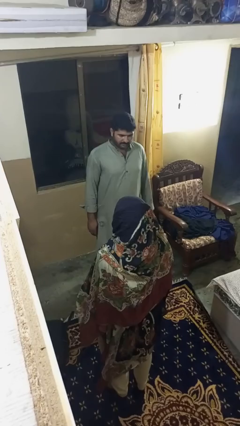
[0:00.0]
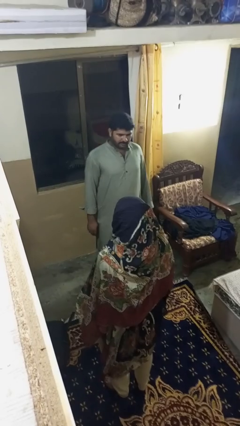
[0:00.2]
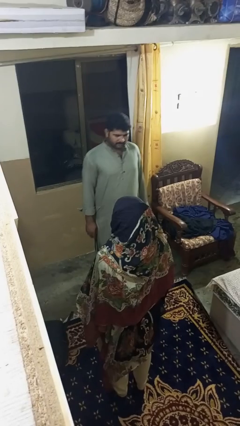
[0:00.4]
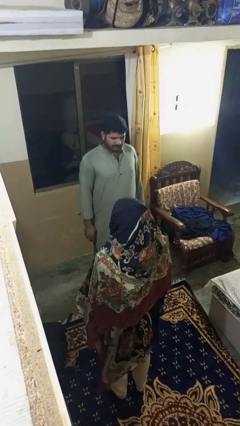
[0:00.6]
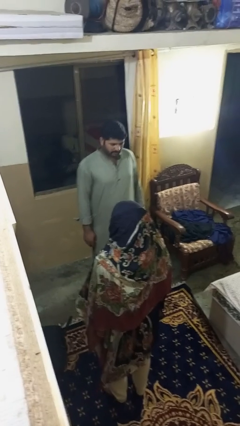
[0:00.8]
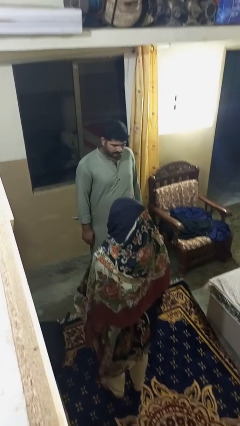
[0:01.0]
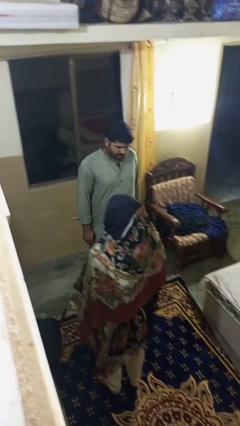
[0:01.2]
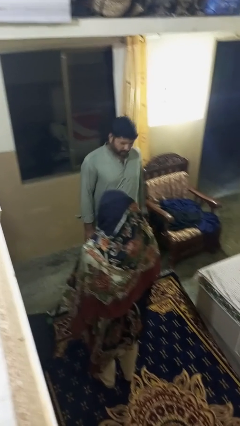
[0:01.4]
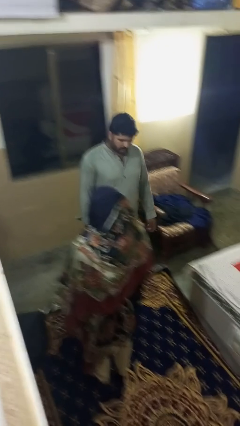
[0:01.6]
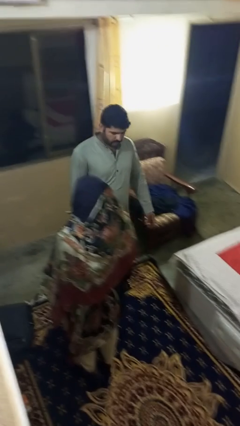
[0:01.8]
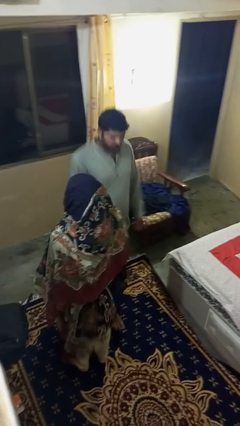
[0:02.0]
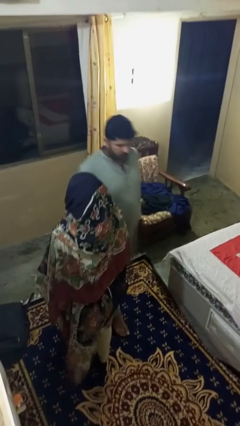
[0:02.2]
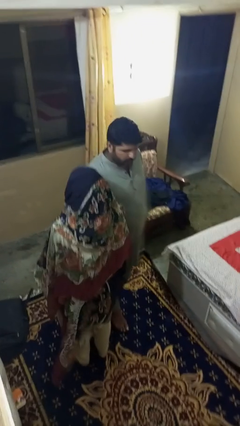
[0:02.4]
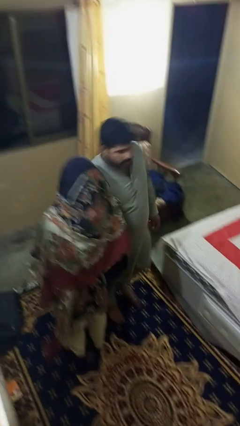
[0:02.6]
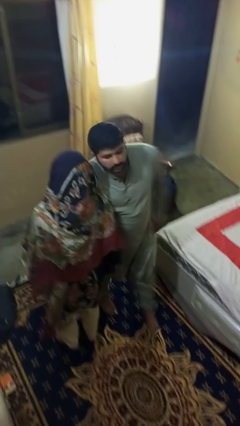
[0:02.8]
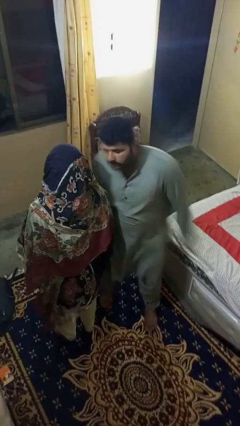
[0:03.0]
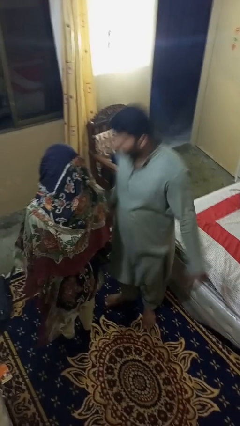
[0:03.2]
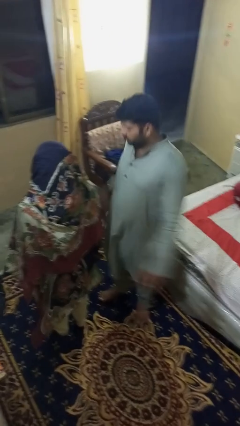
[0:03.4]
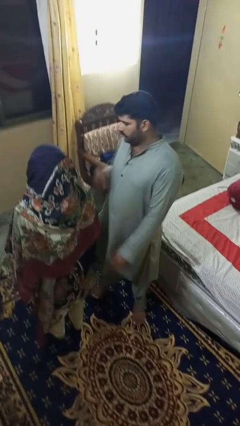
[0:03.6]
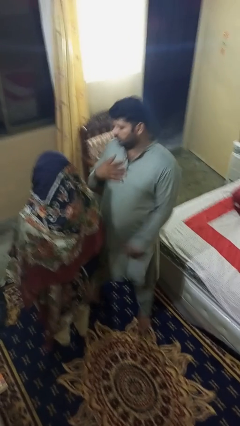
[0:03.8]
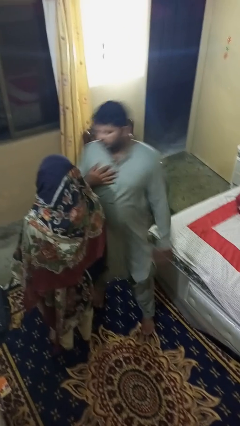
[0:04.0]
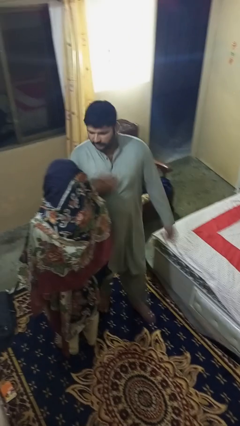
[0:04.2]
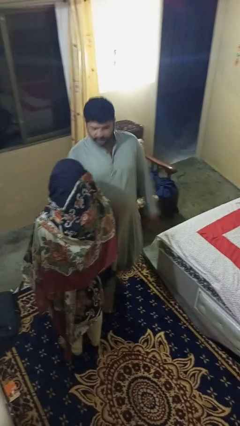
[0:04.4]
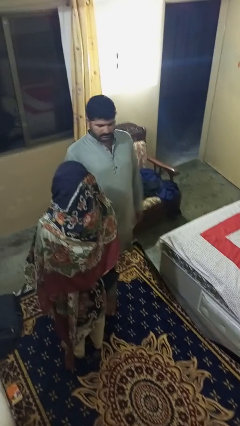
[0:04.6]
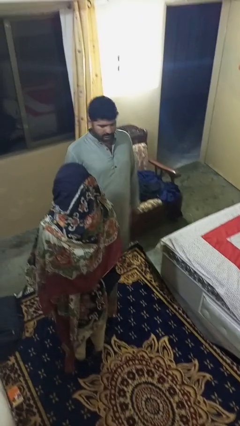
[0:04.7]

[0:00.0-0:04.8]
person bumps into person

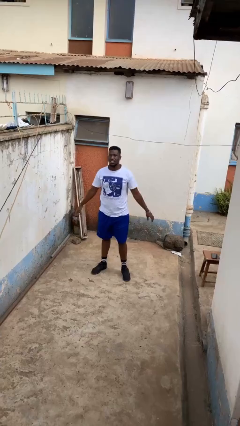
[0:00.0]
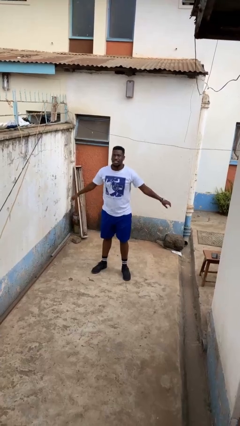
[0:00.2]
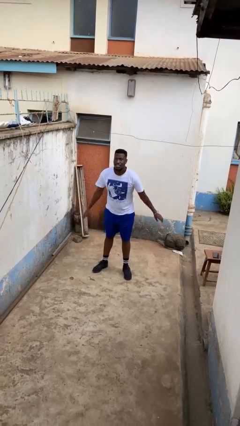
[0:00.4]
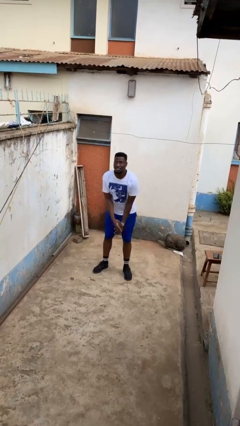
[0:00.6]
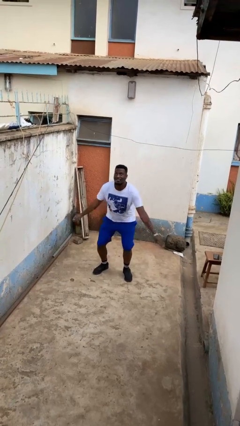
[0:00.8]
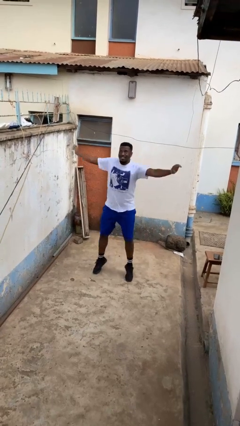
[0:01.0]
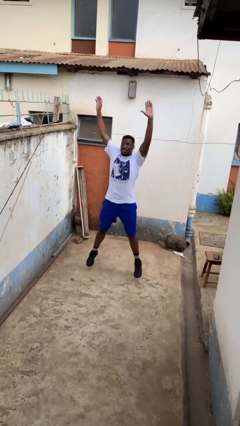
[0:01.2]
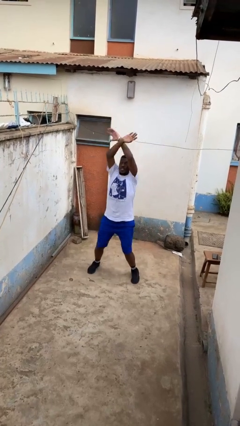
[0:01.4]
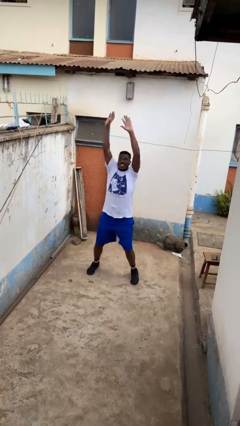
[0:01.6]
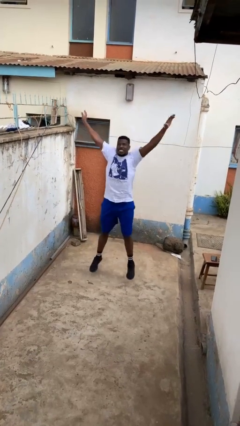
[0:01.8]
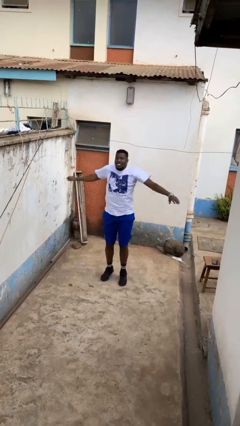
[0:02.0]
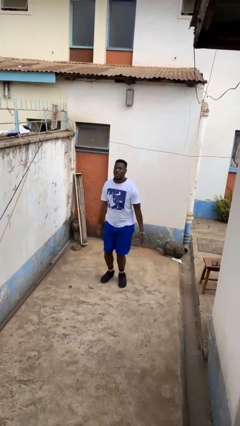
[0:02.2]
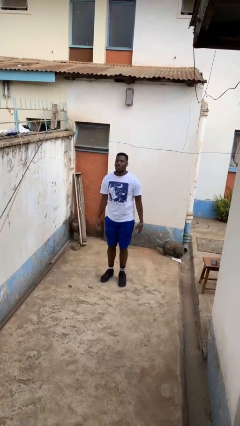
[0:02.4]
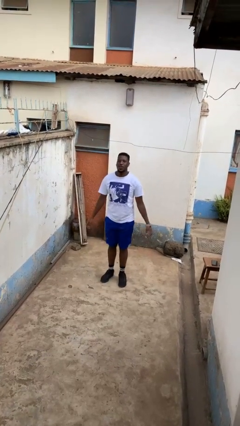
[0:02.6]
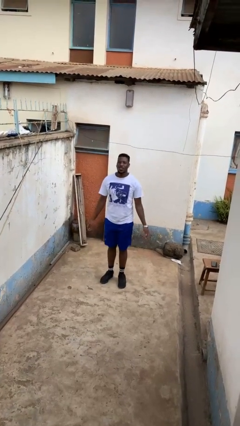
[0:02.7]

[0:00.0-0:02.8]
person exercises with jumping jacks

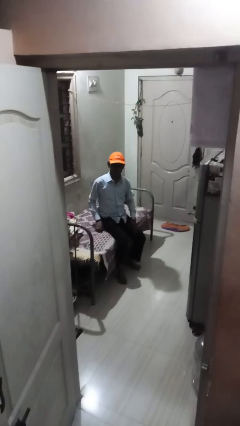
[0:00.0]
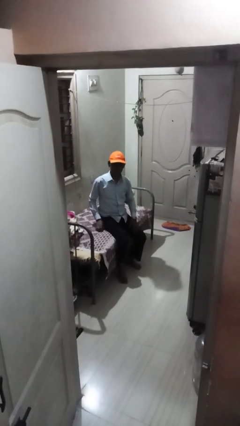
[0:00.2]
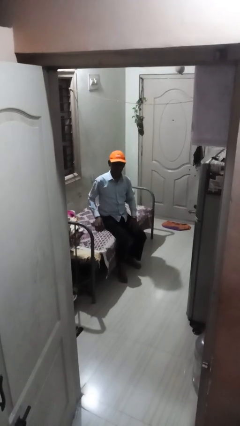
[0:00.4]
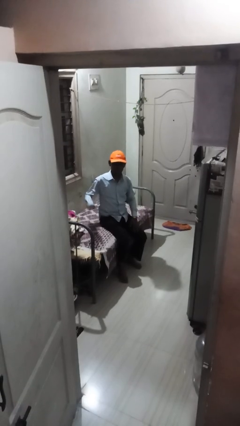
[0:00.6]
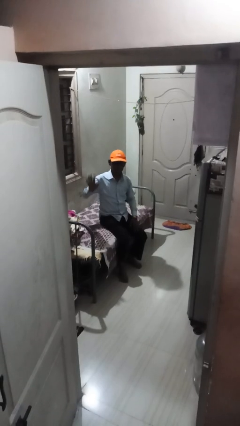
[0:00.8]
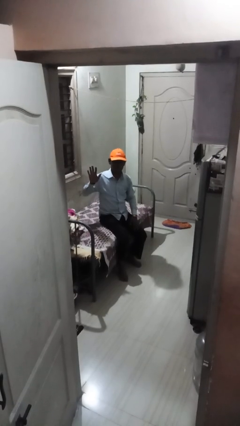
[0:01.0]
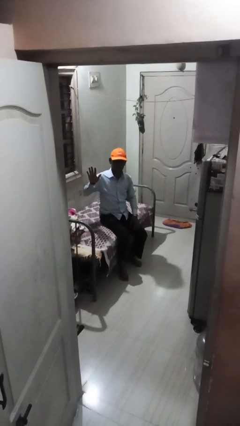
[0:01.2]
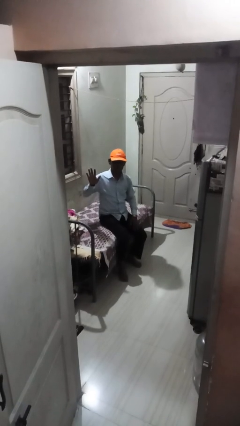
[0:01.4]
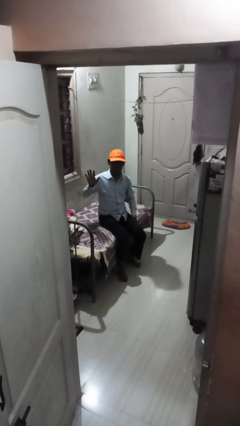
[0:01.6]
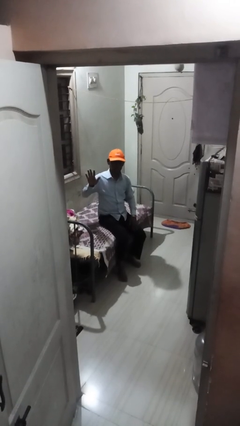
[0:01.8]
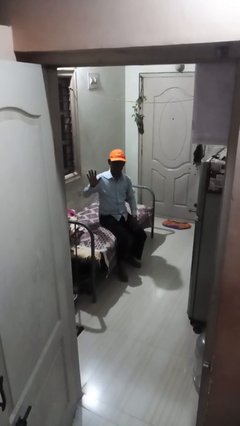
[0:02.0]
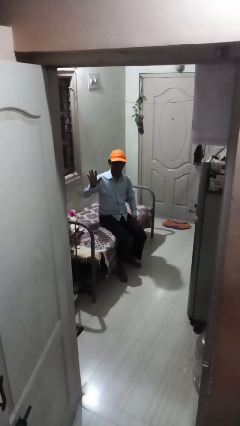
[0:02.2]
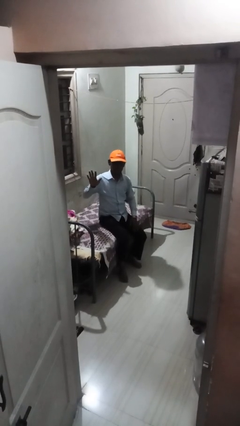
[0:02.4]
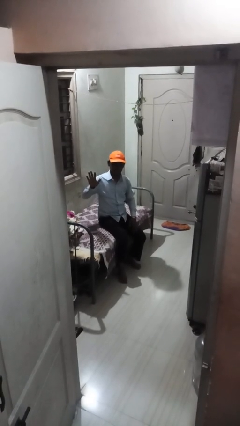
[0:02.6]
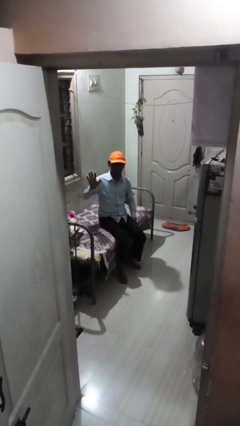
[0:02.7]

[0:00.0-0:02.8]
person gestures number five

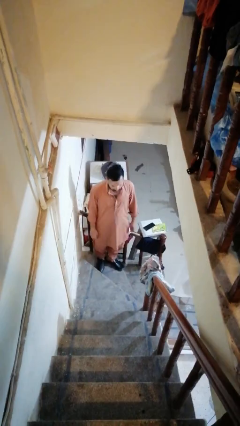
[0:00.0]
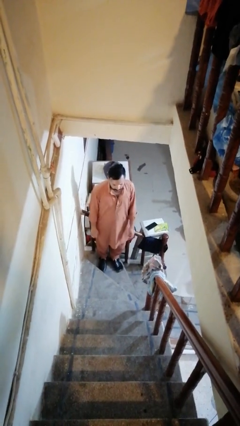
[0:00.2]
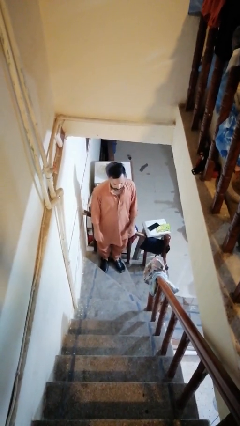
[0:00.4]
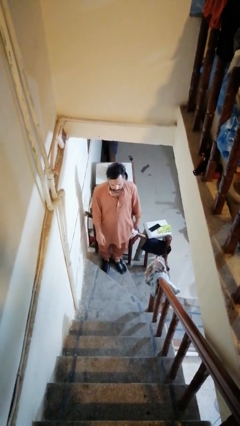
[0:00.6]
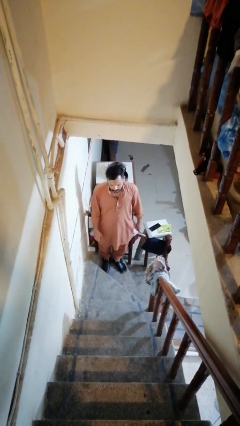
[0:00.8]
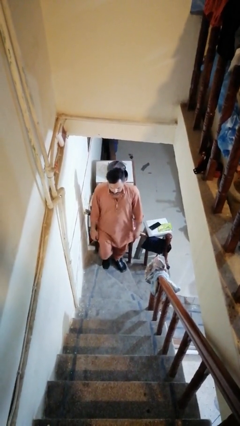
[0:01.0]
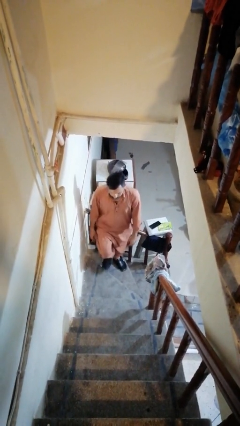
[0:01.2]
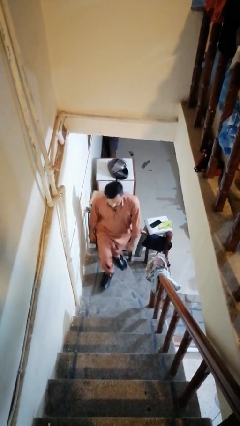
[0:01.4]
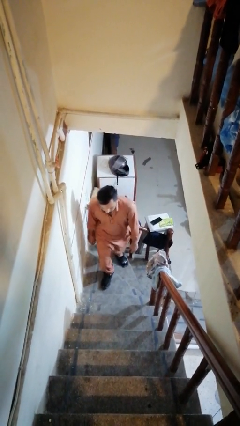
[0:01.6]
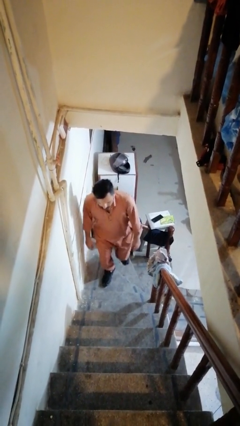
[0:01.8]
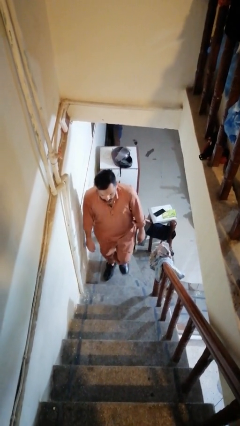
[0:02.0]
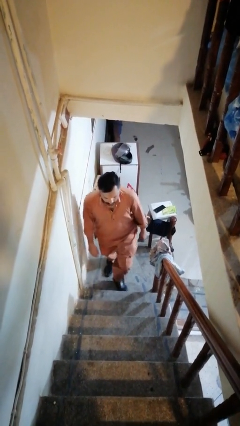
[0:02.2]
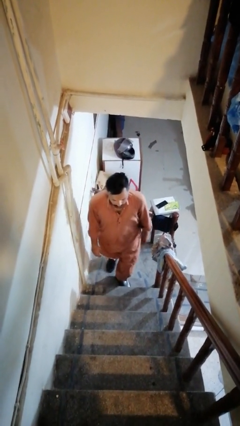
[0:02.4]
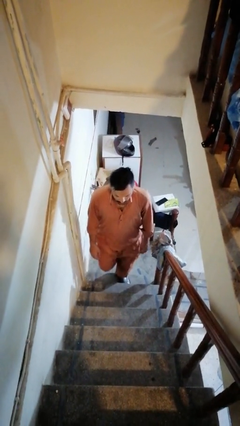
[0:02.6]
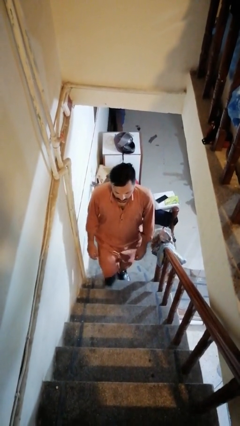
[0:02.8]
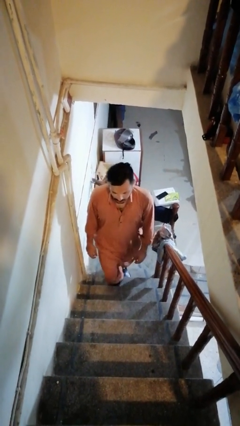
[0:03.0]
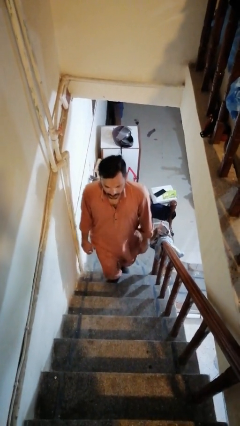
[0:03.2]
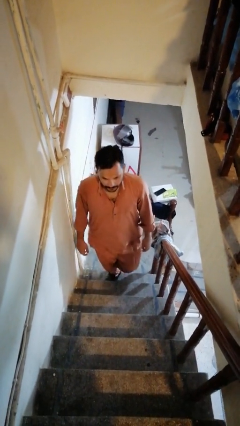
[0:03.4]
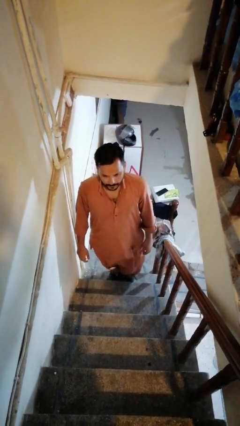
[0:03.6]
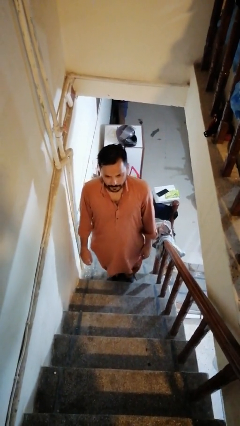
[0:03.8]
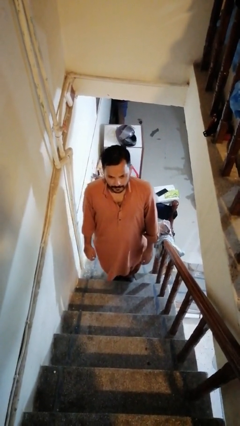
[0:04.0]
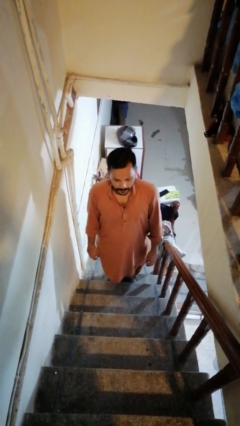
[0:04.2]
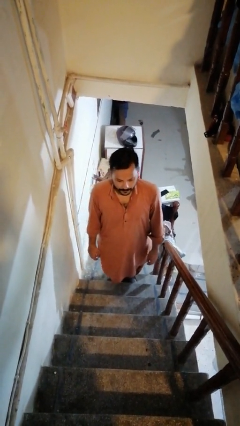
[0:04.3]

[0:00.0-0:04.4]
person climbs up stairs

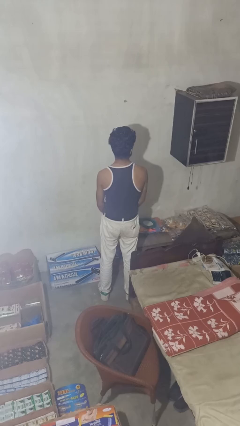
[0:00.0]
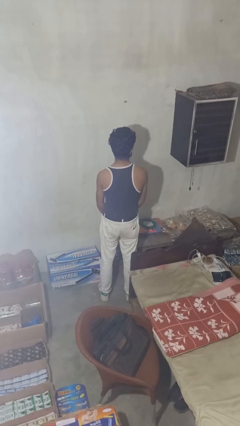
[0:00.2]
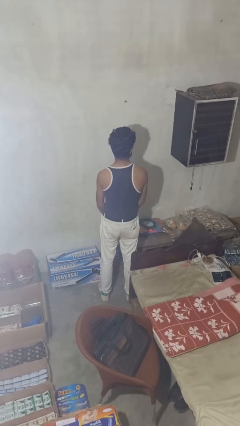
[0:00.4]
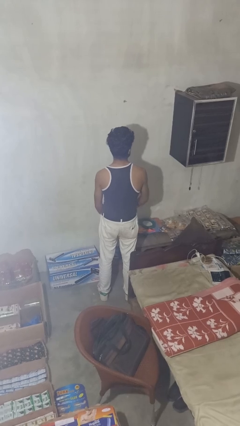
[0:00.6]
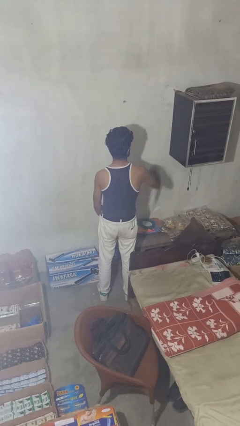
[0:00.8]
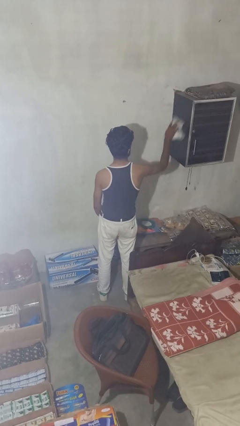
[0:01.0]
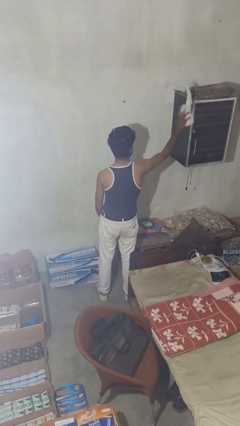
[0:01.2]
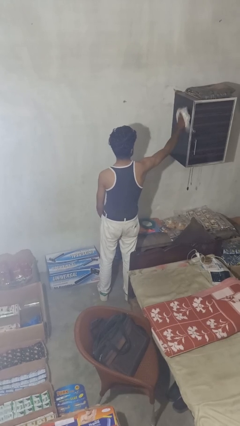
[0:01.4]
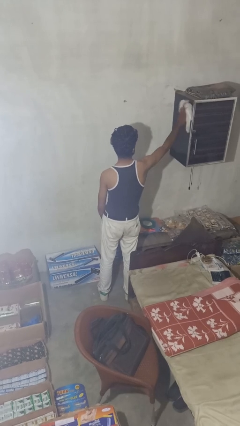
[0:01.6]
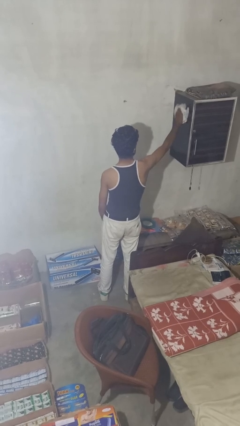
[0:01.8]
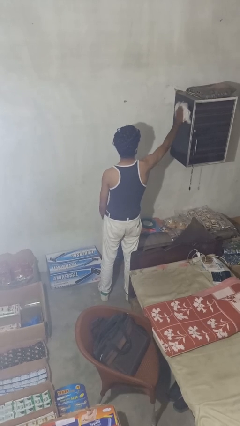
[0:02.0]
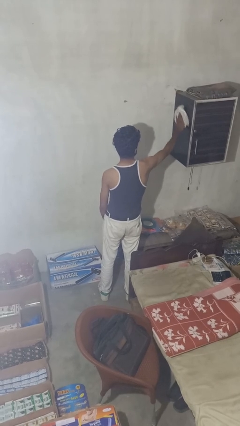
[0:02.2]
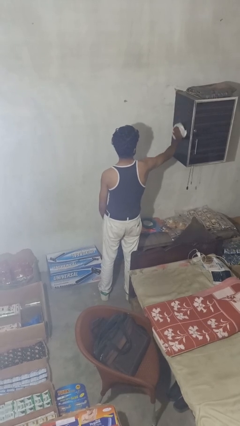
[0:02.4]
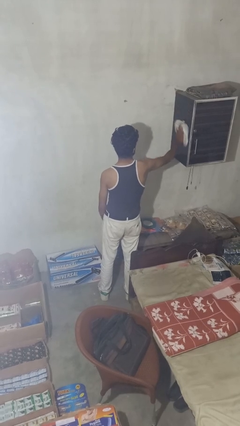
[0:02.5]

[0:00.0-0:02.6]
person dusts furniture

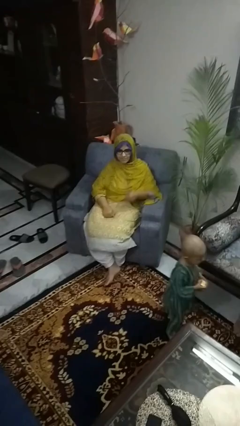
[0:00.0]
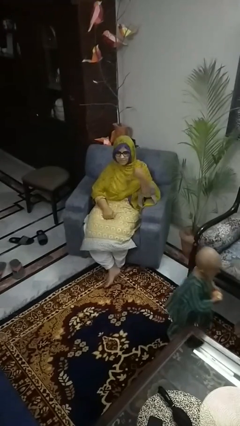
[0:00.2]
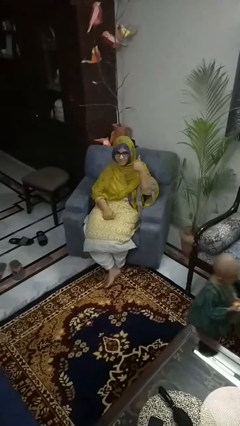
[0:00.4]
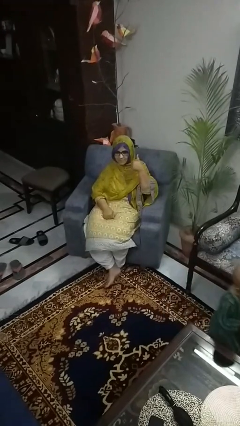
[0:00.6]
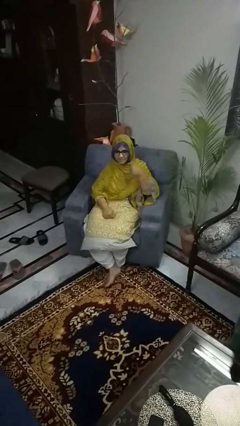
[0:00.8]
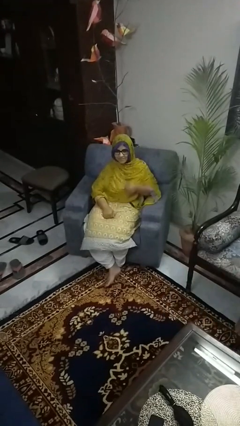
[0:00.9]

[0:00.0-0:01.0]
person gestures call me
